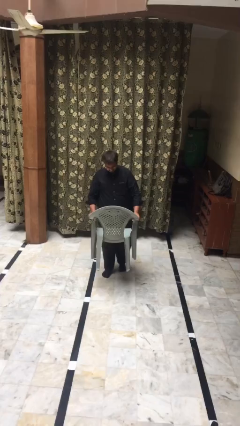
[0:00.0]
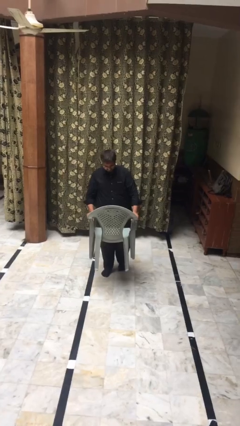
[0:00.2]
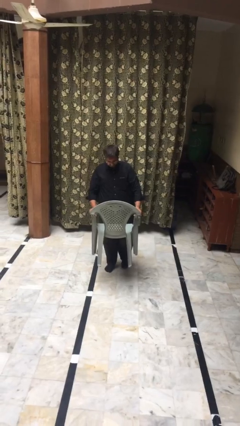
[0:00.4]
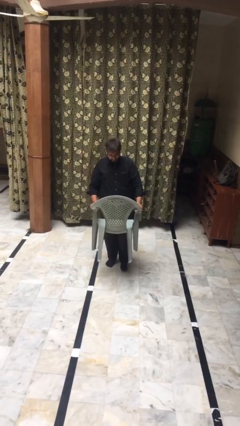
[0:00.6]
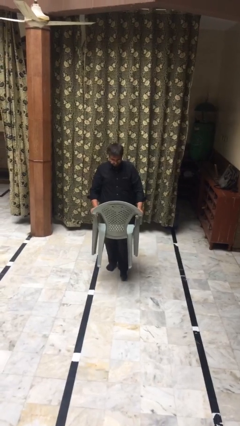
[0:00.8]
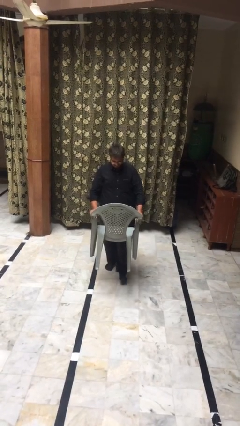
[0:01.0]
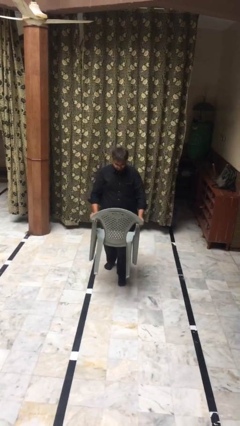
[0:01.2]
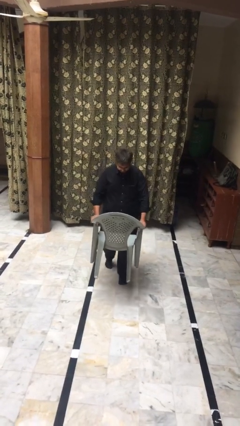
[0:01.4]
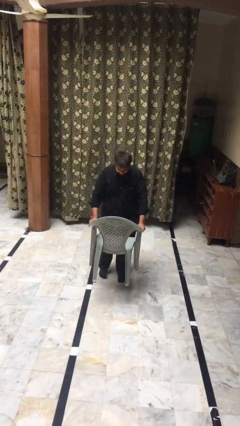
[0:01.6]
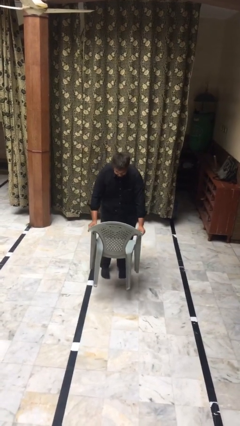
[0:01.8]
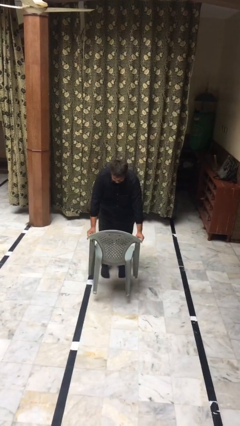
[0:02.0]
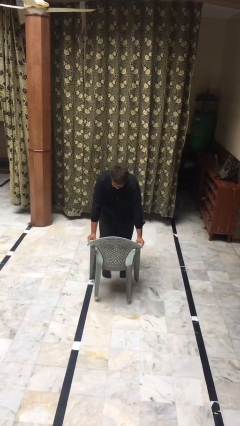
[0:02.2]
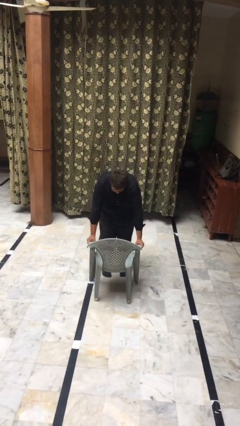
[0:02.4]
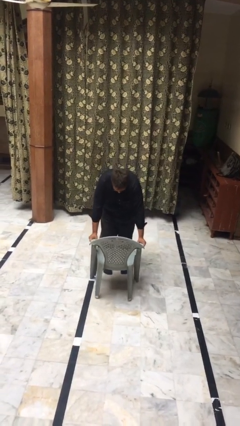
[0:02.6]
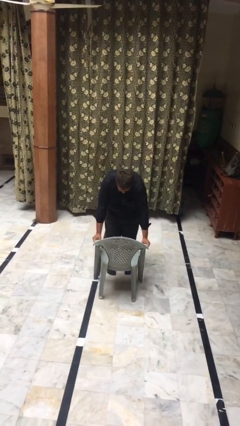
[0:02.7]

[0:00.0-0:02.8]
person puts down object on floor

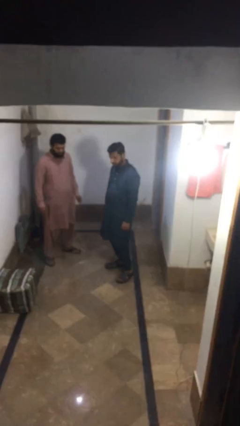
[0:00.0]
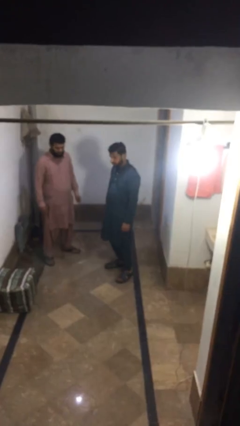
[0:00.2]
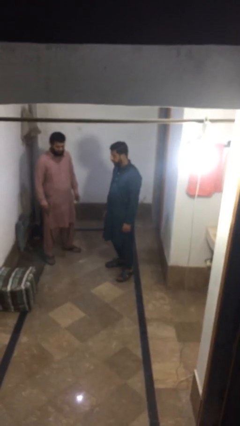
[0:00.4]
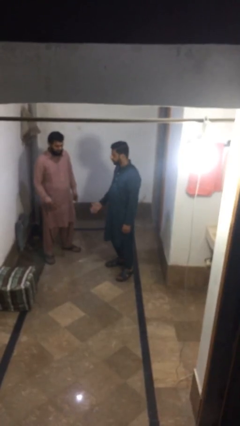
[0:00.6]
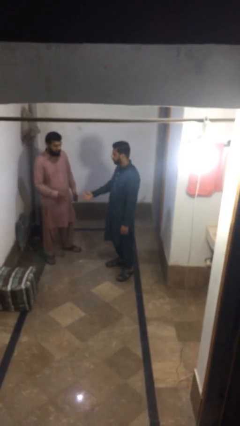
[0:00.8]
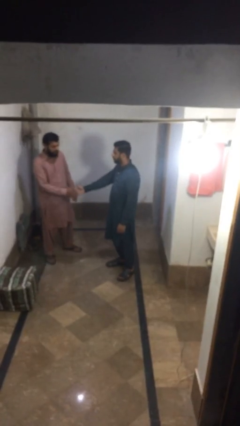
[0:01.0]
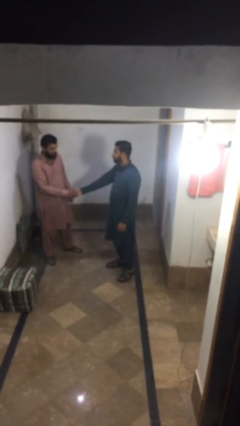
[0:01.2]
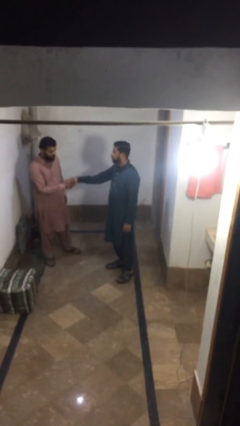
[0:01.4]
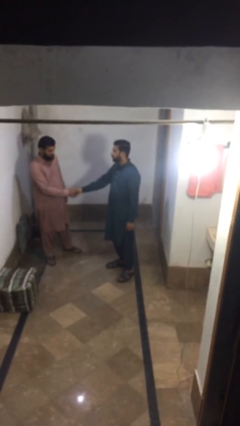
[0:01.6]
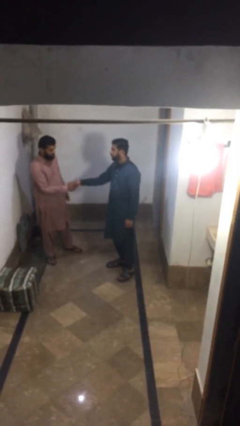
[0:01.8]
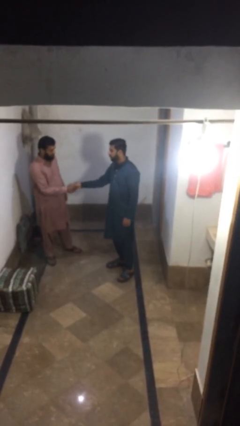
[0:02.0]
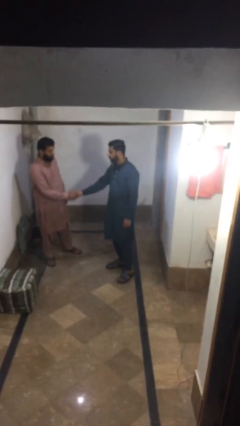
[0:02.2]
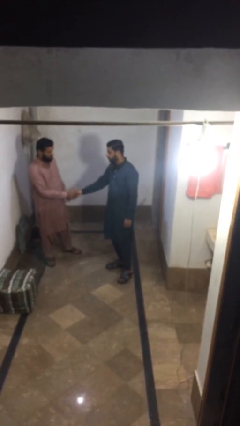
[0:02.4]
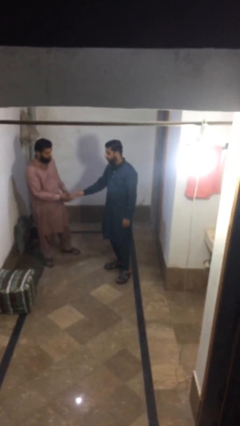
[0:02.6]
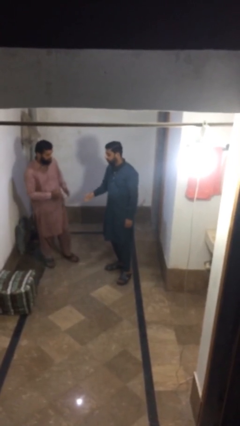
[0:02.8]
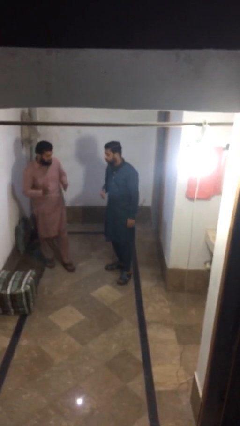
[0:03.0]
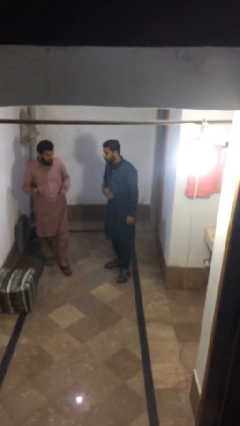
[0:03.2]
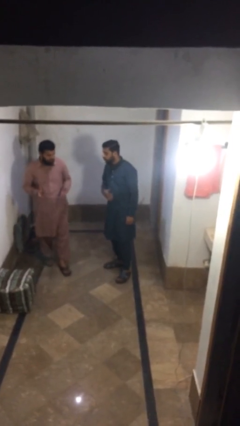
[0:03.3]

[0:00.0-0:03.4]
person shakes hand

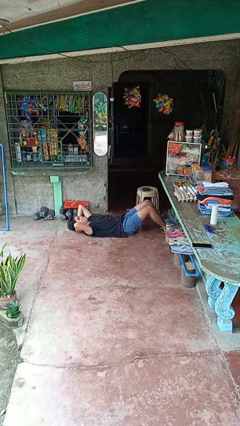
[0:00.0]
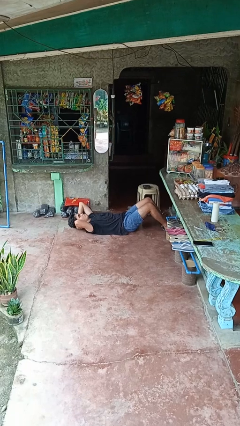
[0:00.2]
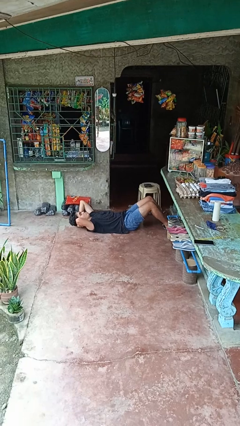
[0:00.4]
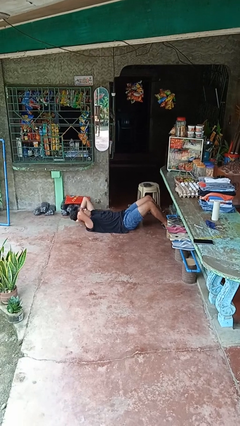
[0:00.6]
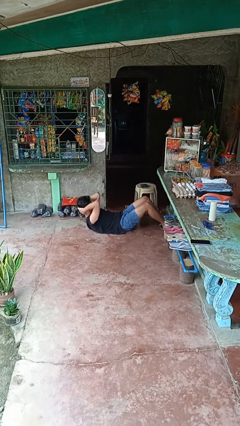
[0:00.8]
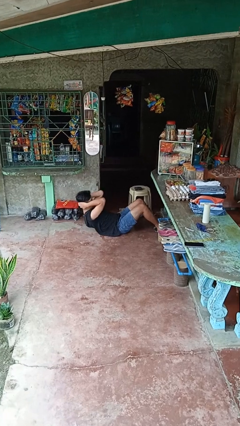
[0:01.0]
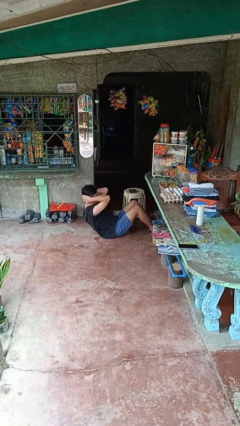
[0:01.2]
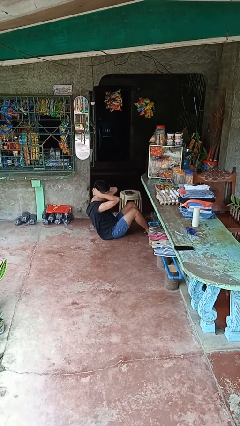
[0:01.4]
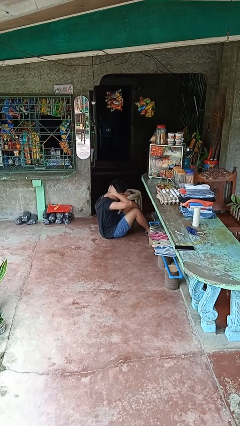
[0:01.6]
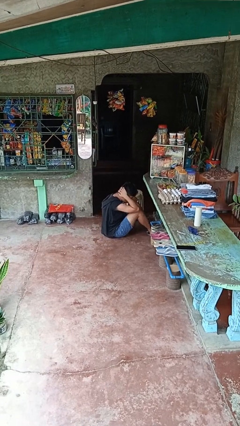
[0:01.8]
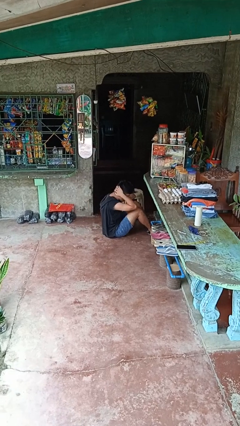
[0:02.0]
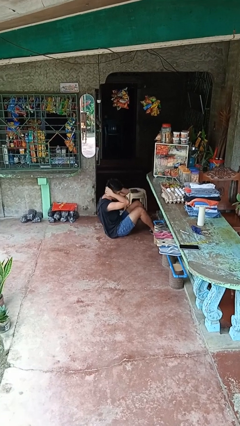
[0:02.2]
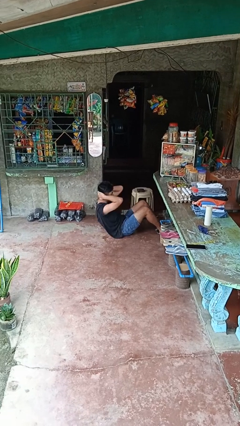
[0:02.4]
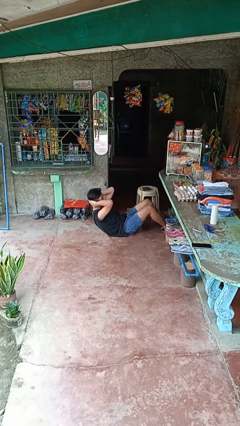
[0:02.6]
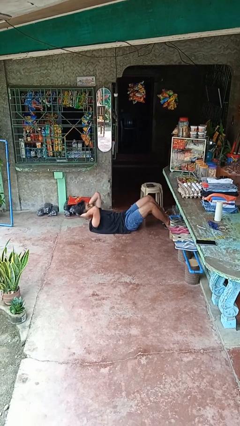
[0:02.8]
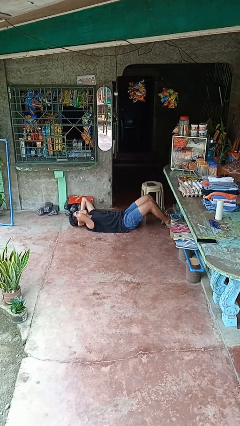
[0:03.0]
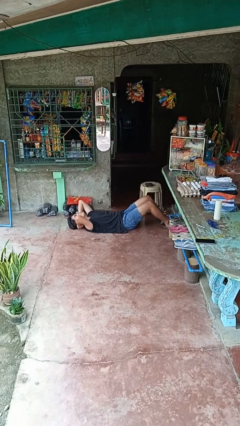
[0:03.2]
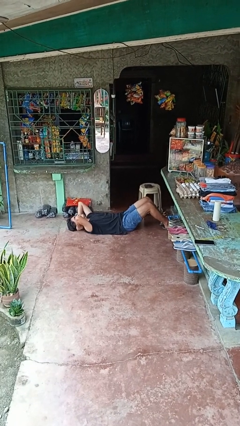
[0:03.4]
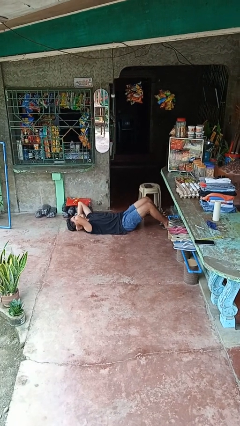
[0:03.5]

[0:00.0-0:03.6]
person exercises with situp

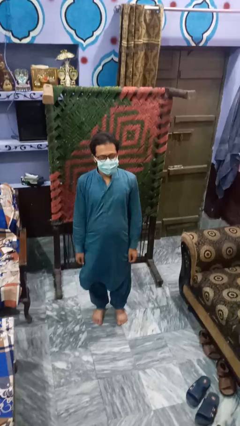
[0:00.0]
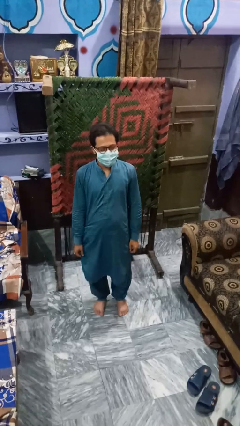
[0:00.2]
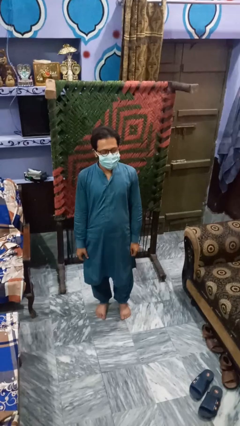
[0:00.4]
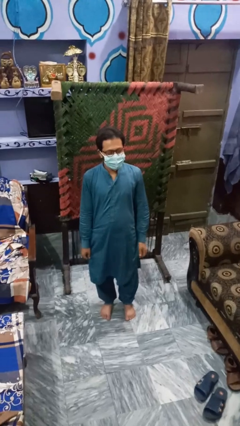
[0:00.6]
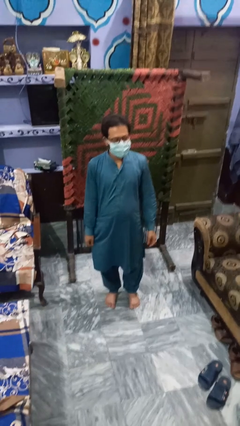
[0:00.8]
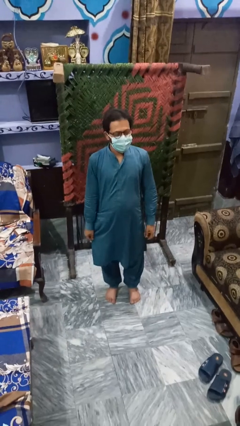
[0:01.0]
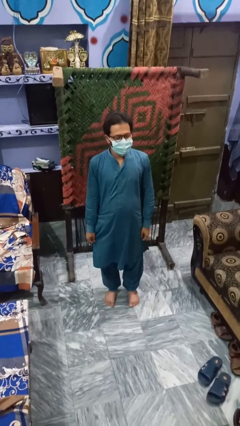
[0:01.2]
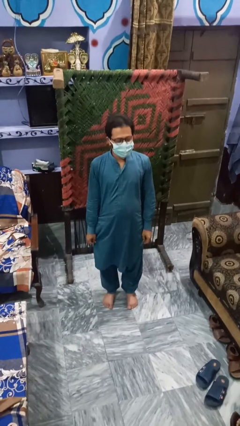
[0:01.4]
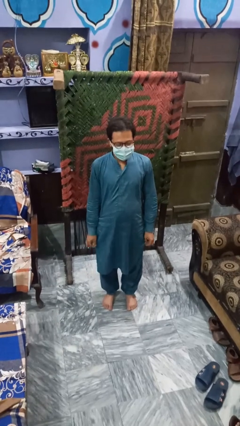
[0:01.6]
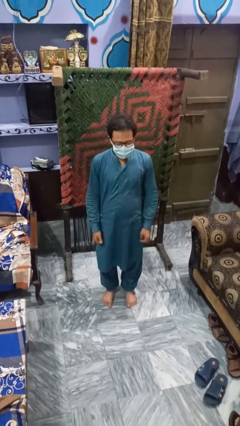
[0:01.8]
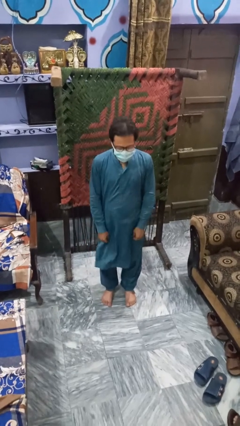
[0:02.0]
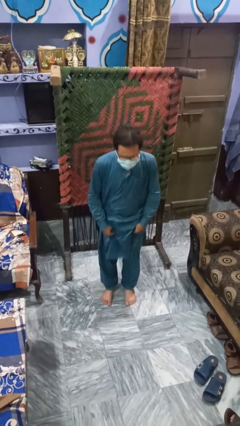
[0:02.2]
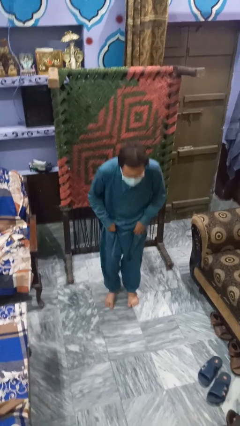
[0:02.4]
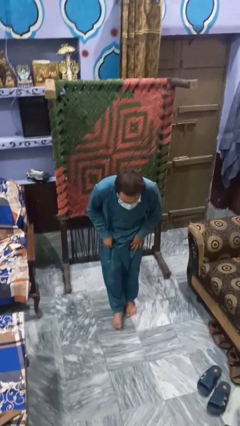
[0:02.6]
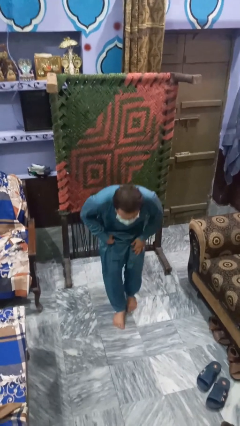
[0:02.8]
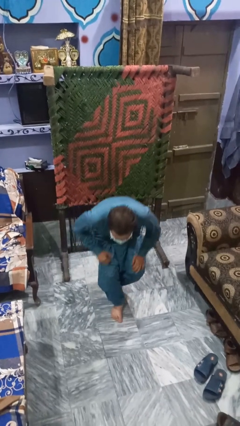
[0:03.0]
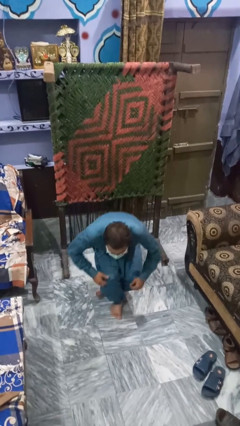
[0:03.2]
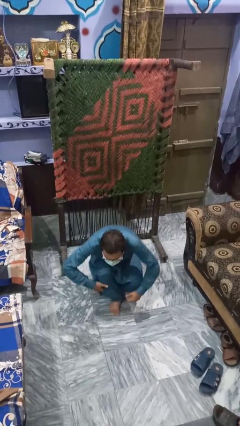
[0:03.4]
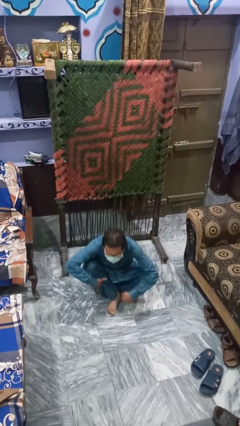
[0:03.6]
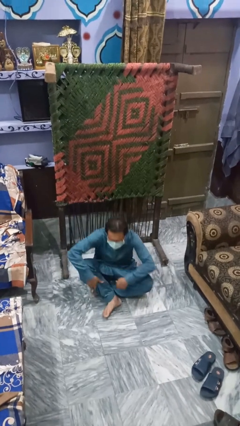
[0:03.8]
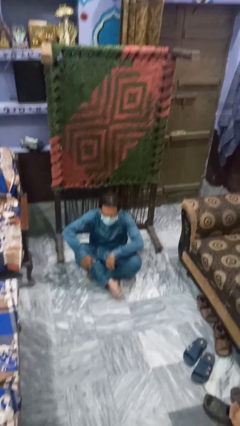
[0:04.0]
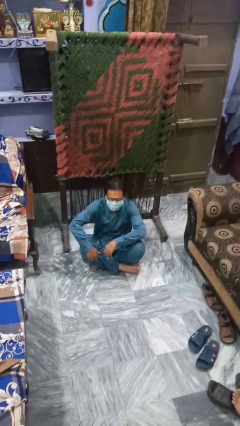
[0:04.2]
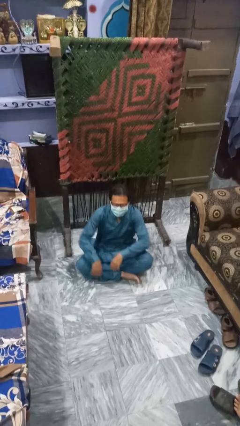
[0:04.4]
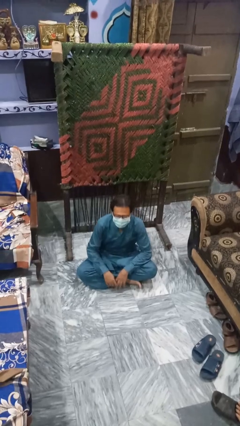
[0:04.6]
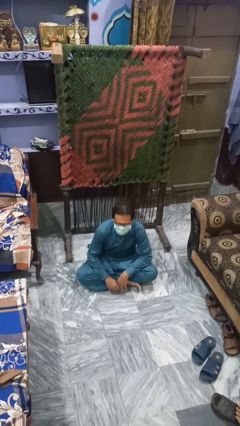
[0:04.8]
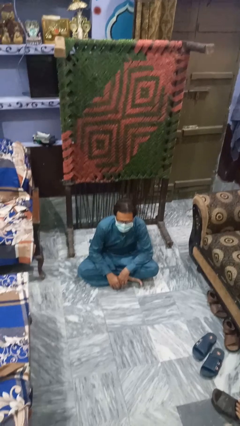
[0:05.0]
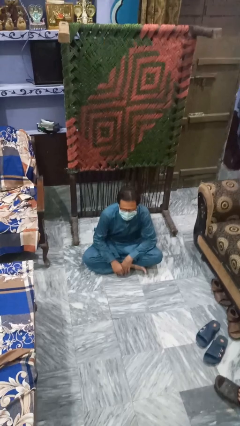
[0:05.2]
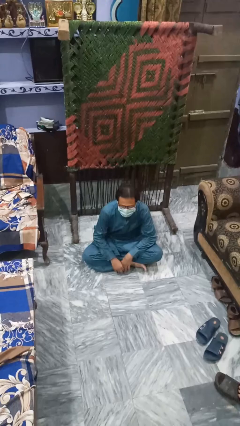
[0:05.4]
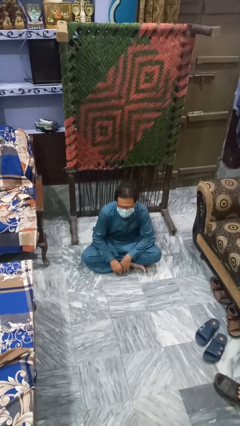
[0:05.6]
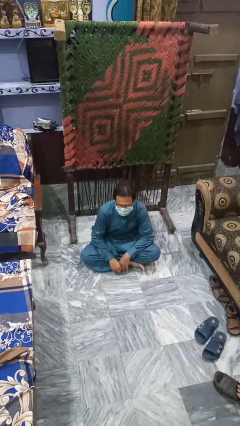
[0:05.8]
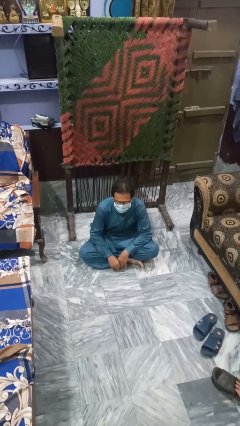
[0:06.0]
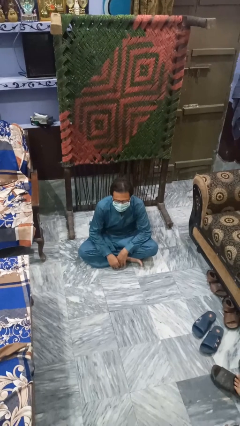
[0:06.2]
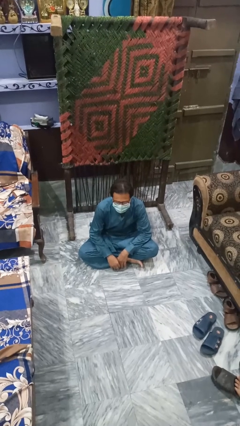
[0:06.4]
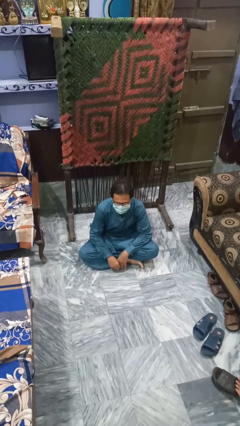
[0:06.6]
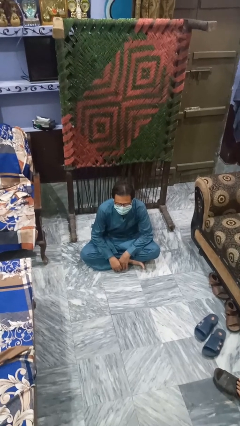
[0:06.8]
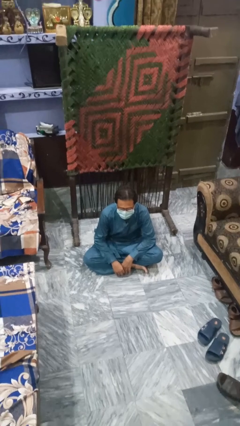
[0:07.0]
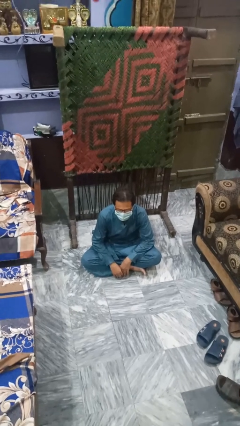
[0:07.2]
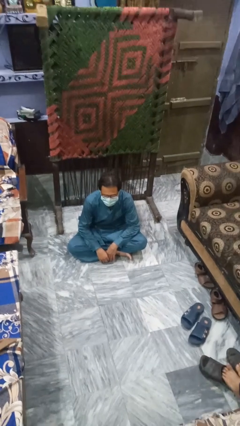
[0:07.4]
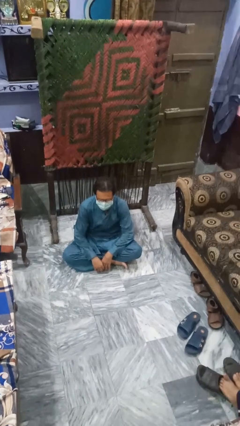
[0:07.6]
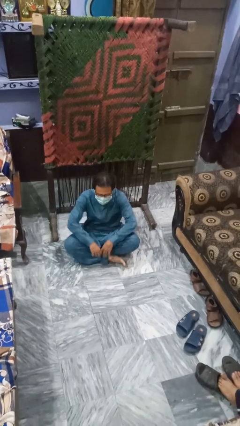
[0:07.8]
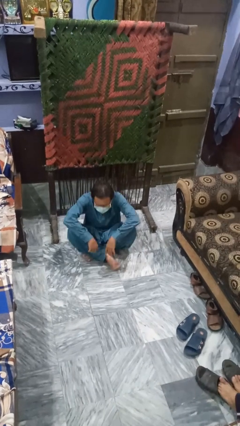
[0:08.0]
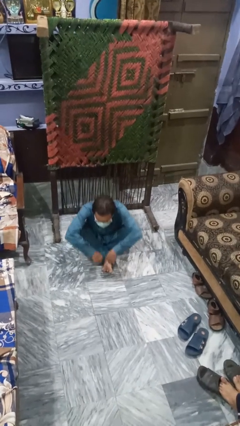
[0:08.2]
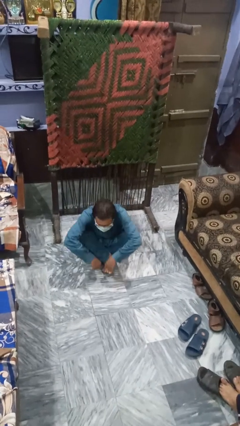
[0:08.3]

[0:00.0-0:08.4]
person sits crisscross
